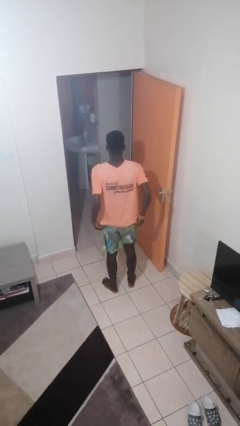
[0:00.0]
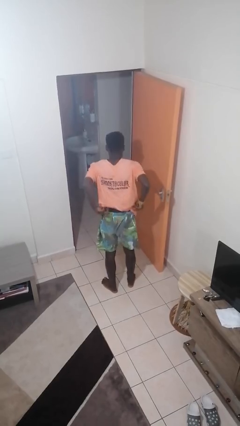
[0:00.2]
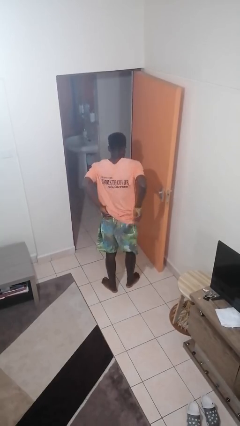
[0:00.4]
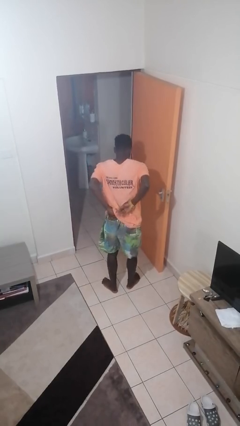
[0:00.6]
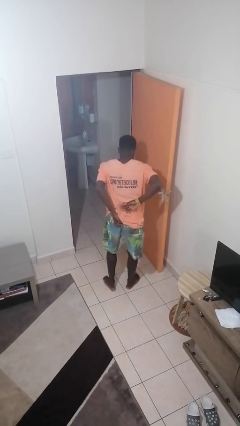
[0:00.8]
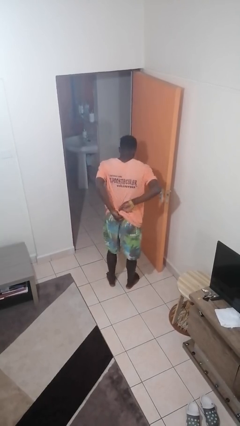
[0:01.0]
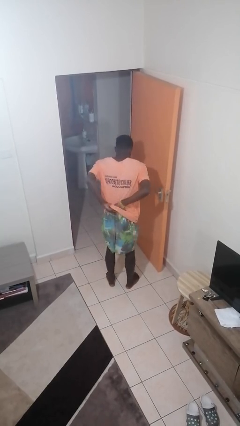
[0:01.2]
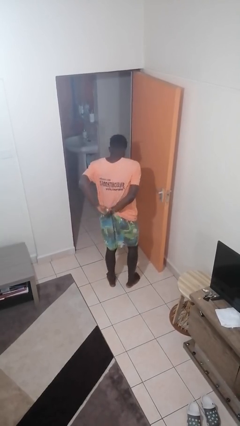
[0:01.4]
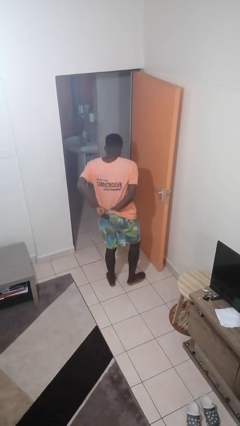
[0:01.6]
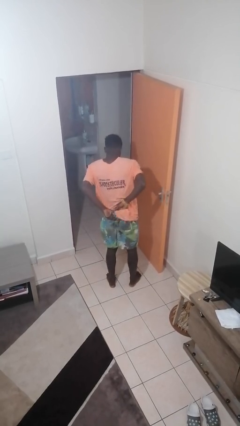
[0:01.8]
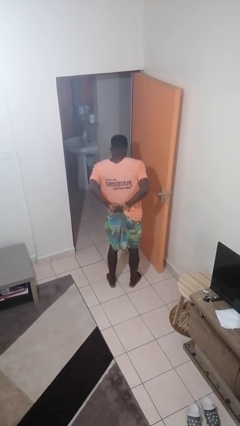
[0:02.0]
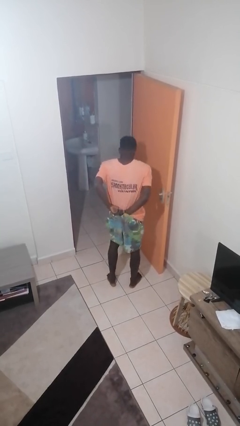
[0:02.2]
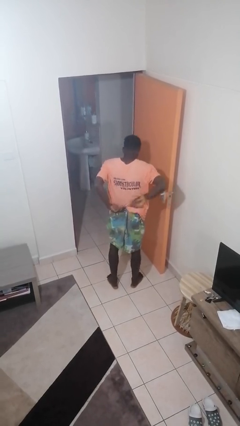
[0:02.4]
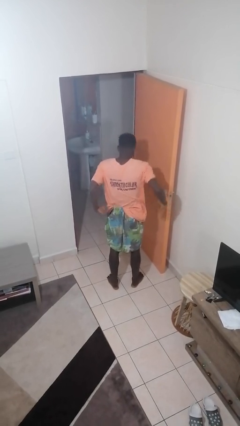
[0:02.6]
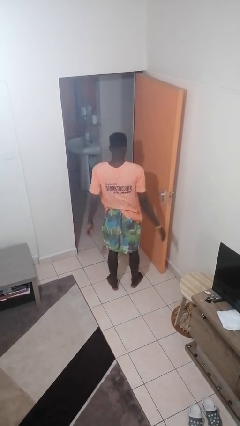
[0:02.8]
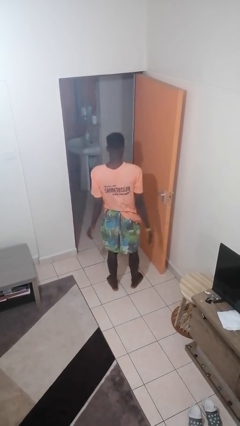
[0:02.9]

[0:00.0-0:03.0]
person tucks in shirt

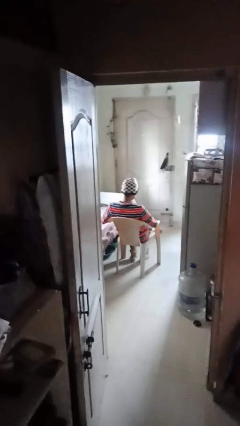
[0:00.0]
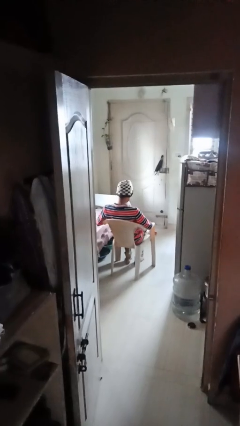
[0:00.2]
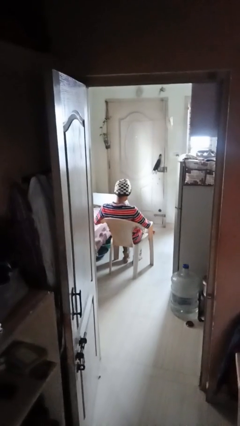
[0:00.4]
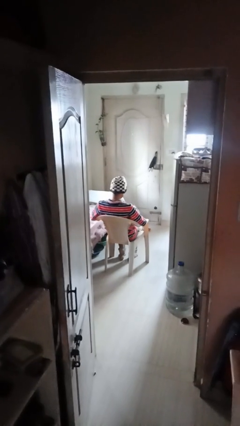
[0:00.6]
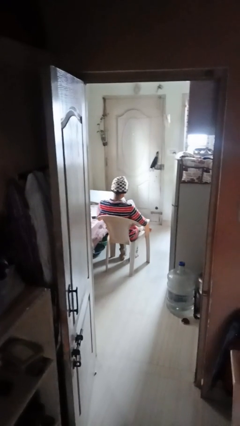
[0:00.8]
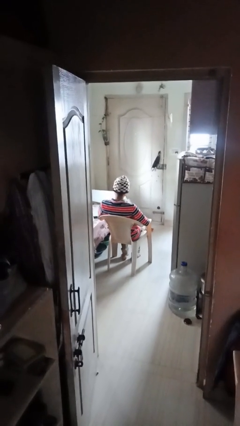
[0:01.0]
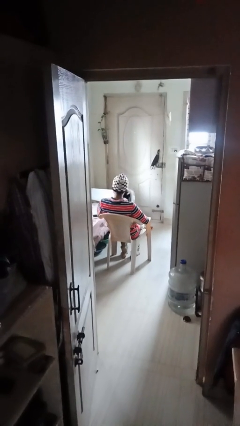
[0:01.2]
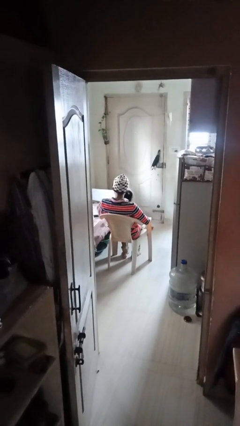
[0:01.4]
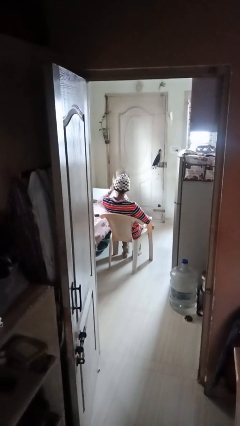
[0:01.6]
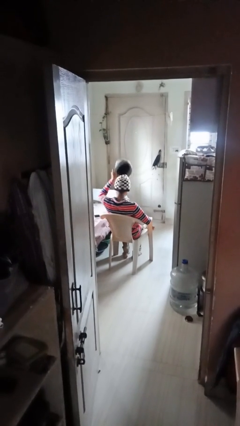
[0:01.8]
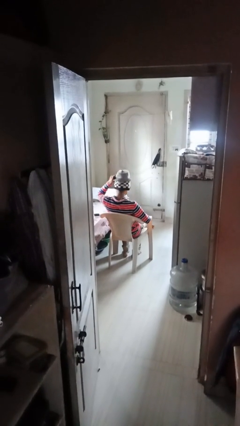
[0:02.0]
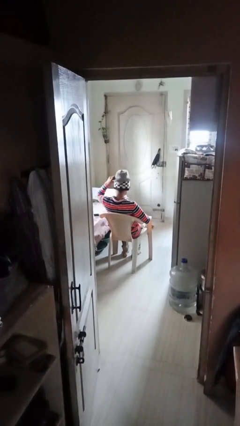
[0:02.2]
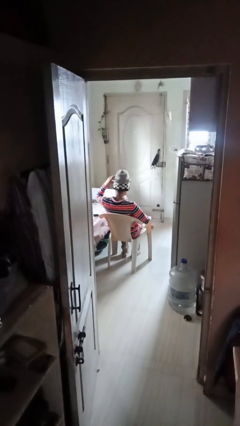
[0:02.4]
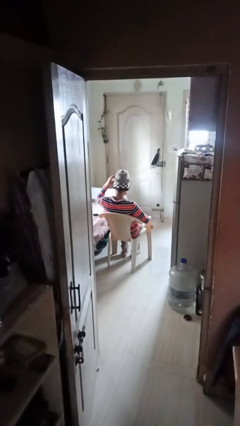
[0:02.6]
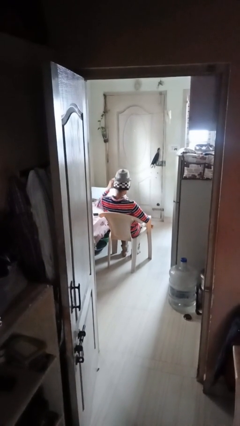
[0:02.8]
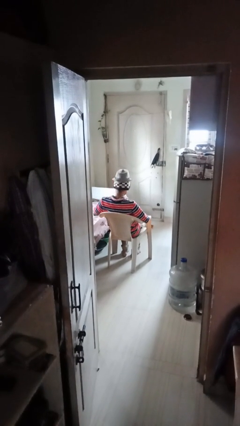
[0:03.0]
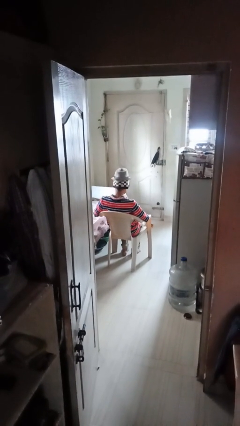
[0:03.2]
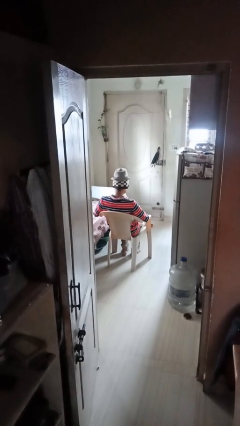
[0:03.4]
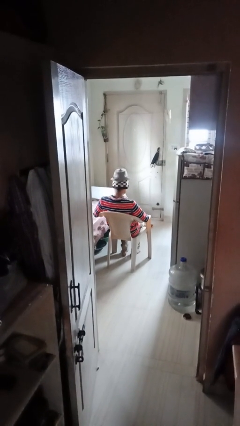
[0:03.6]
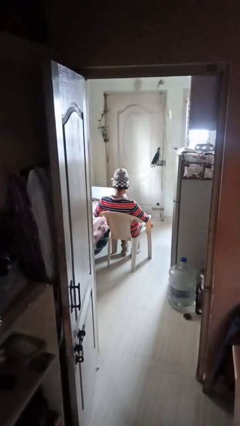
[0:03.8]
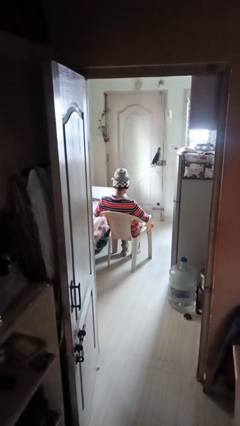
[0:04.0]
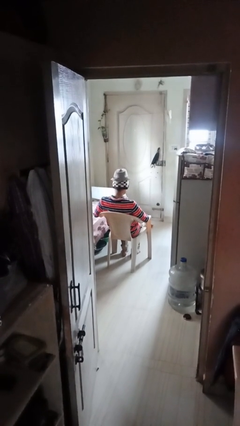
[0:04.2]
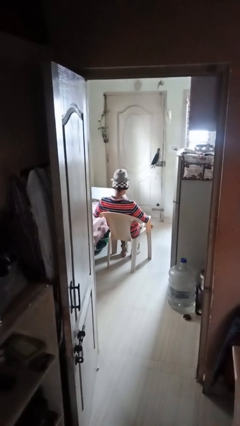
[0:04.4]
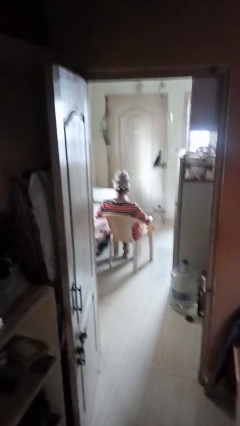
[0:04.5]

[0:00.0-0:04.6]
person puts on hat

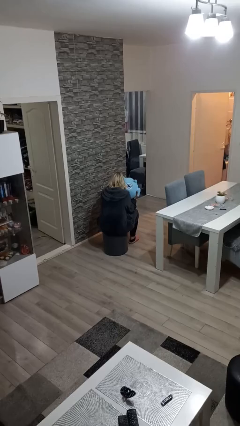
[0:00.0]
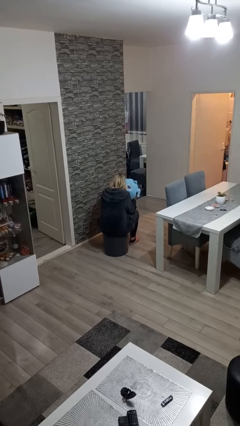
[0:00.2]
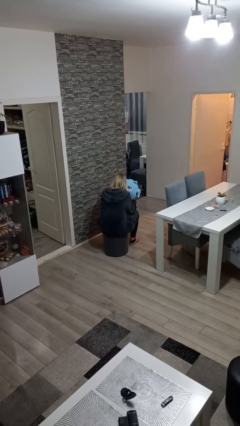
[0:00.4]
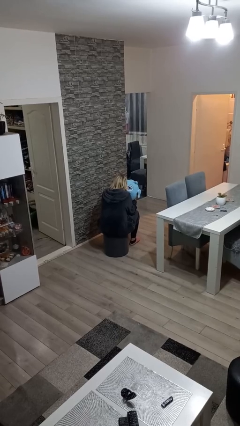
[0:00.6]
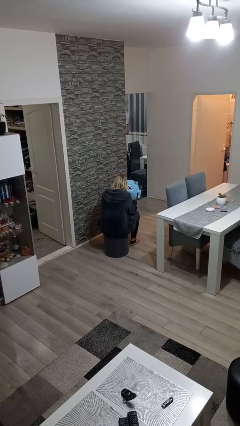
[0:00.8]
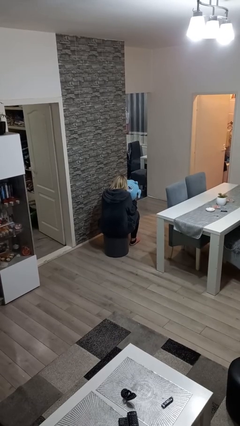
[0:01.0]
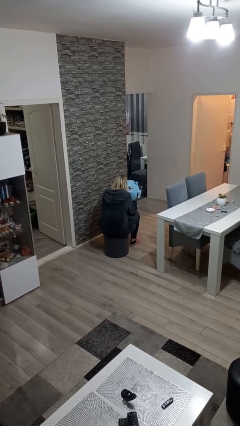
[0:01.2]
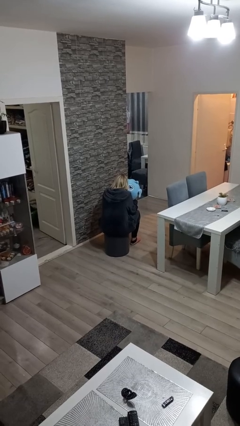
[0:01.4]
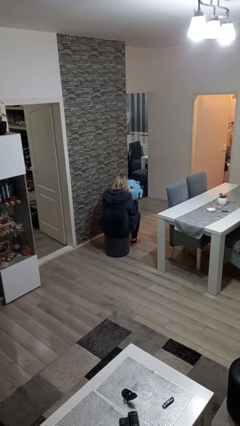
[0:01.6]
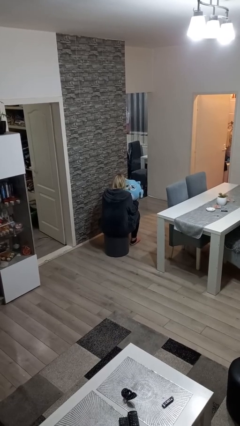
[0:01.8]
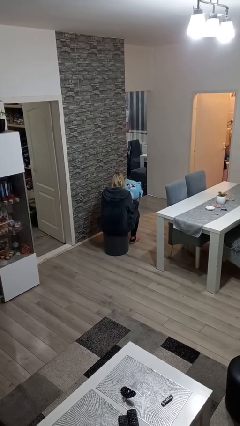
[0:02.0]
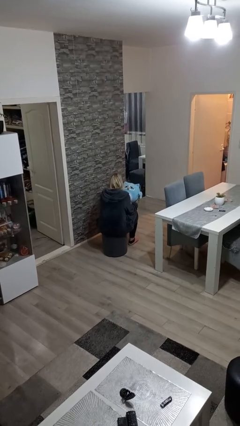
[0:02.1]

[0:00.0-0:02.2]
person hugs stuffed animal

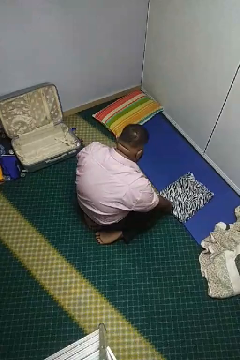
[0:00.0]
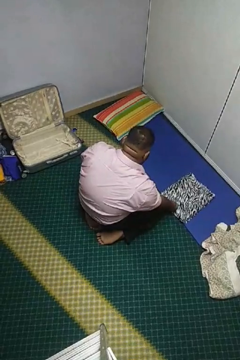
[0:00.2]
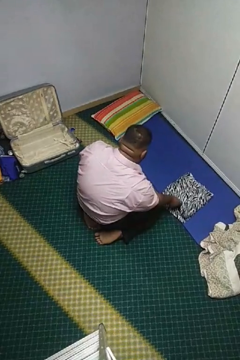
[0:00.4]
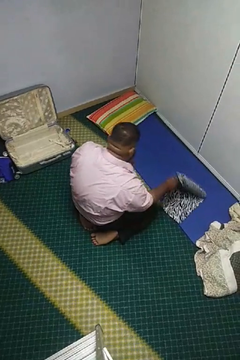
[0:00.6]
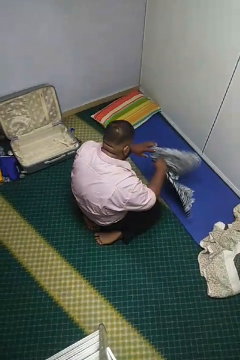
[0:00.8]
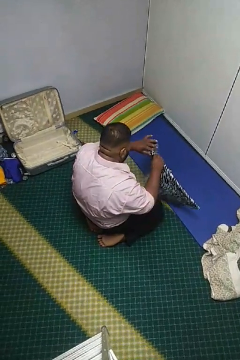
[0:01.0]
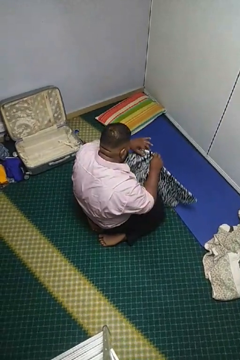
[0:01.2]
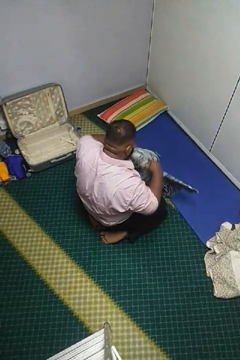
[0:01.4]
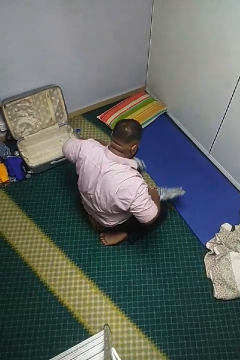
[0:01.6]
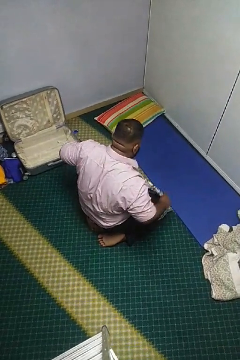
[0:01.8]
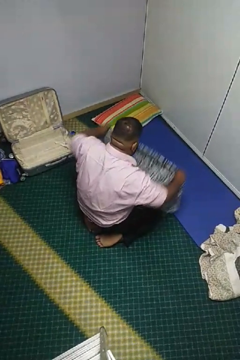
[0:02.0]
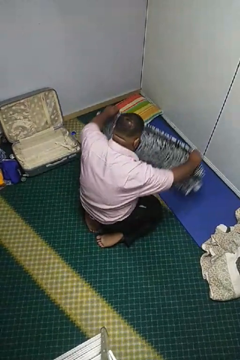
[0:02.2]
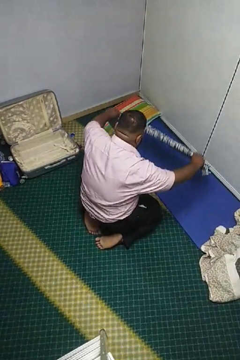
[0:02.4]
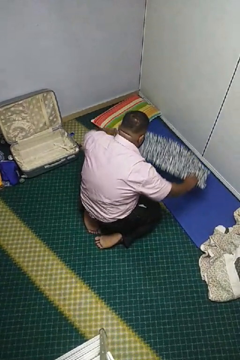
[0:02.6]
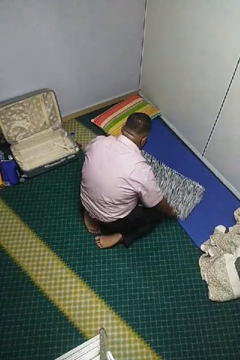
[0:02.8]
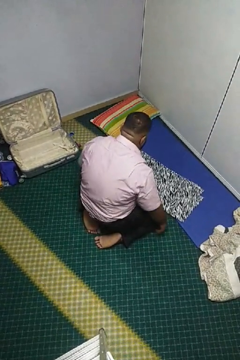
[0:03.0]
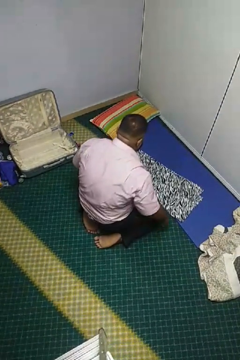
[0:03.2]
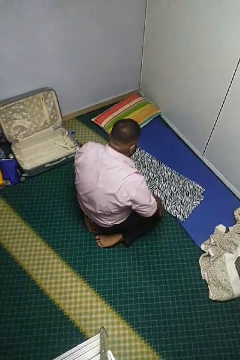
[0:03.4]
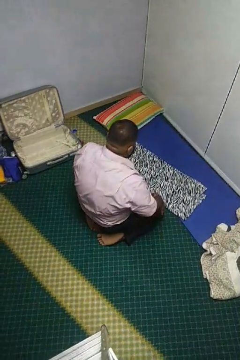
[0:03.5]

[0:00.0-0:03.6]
person unfolds blanket

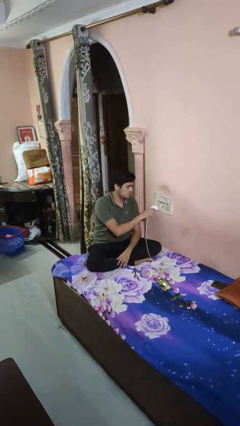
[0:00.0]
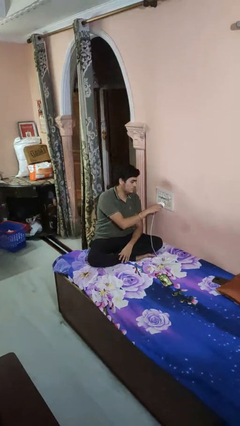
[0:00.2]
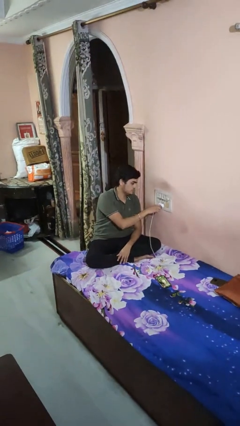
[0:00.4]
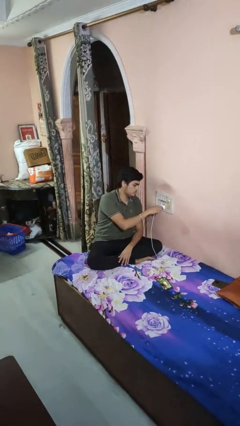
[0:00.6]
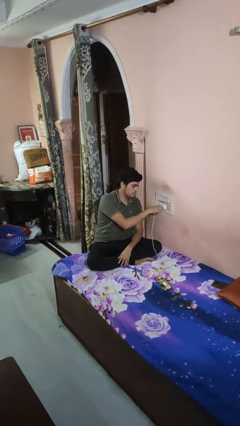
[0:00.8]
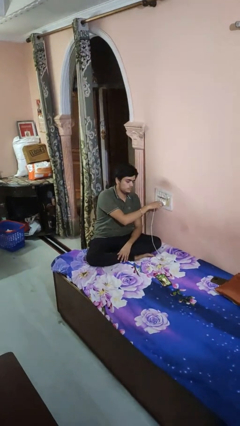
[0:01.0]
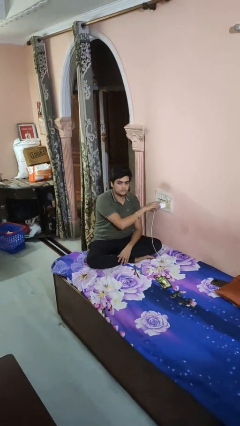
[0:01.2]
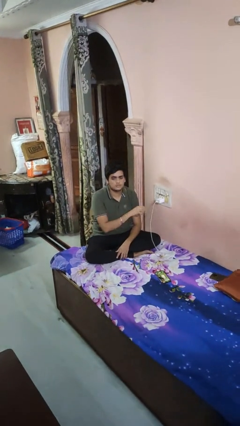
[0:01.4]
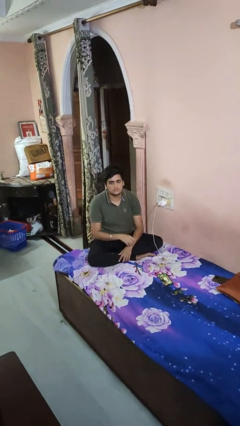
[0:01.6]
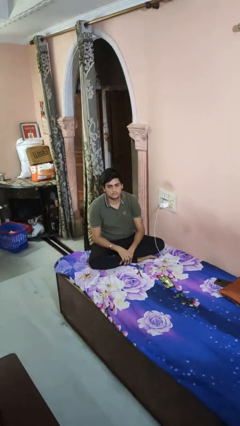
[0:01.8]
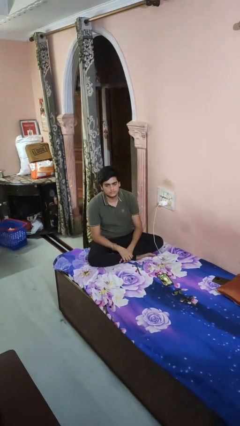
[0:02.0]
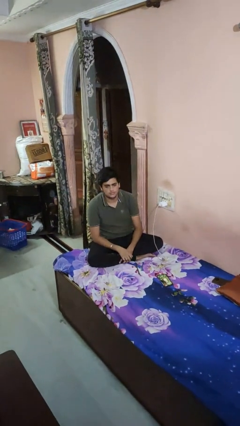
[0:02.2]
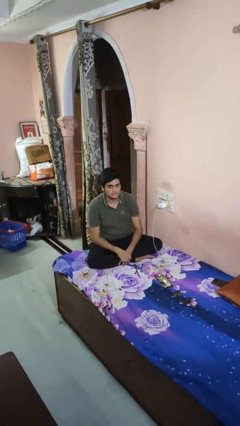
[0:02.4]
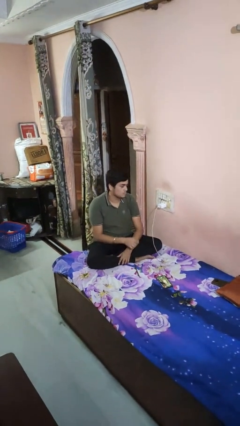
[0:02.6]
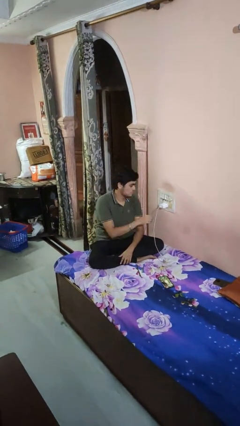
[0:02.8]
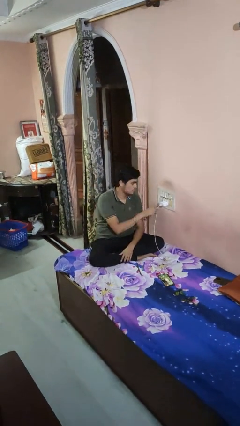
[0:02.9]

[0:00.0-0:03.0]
person plugs into electrical socket

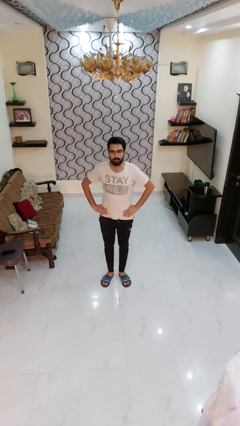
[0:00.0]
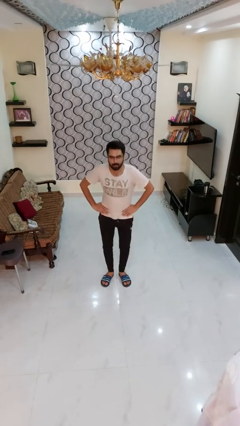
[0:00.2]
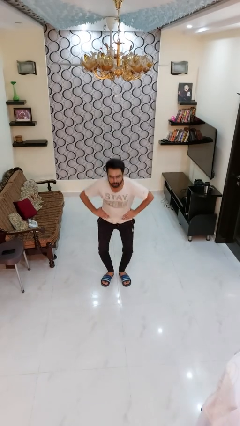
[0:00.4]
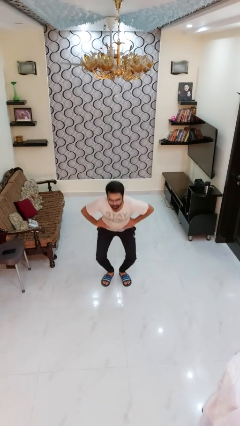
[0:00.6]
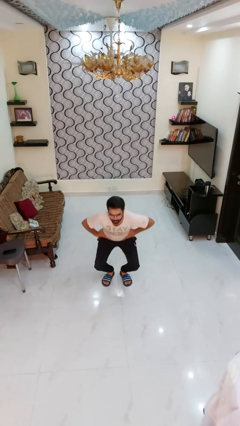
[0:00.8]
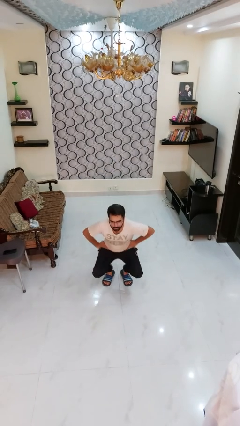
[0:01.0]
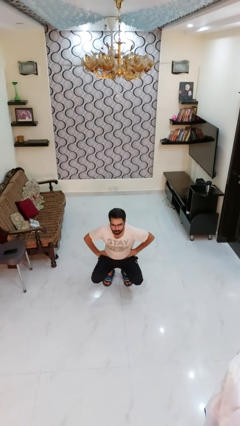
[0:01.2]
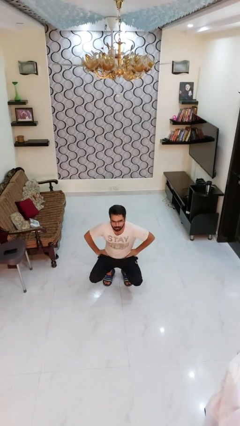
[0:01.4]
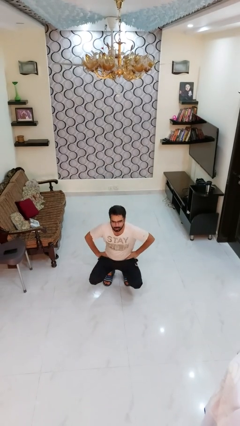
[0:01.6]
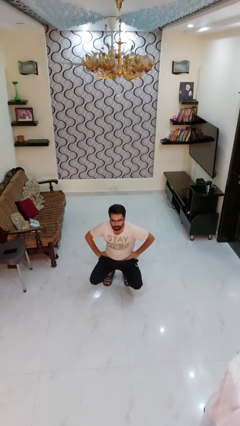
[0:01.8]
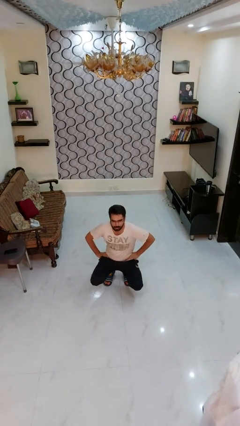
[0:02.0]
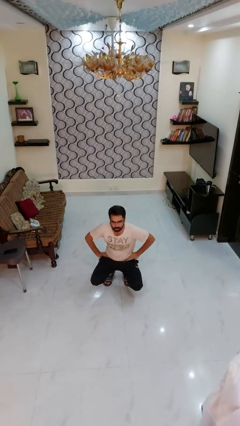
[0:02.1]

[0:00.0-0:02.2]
person squats
